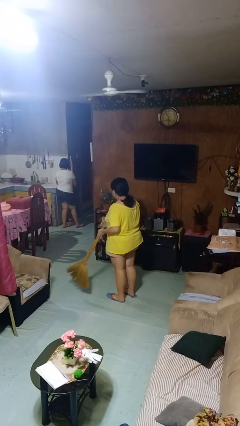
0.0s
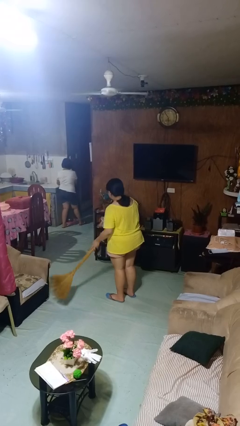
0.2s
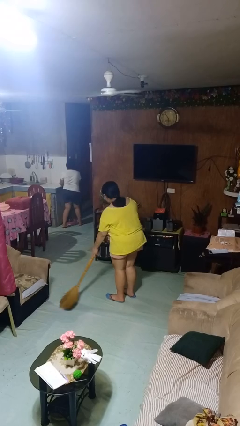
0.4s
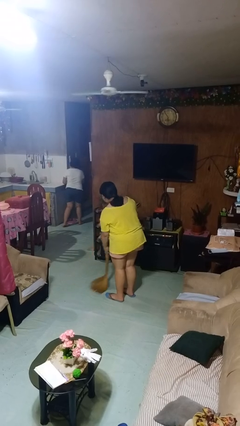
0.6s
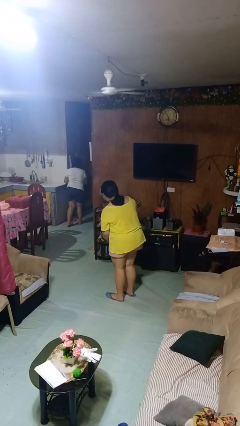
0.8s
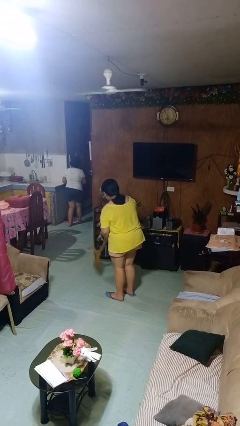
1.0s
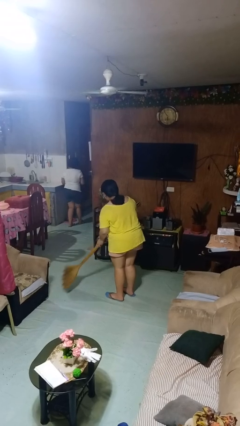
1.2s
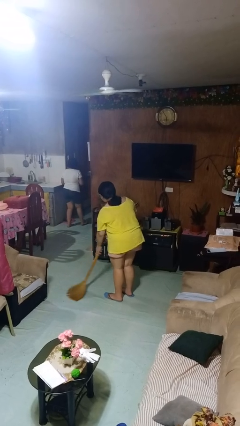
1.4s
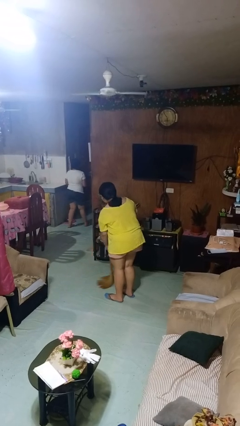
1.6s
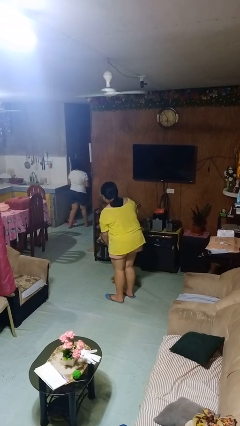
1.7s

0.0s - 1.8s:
person sweeps floor

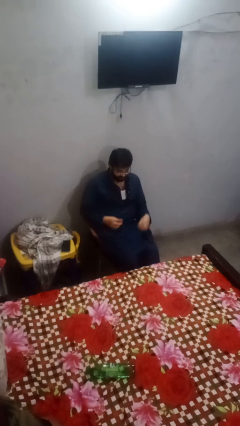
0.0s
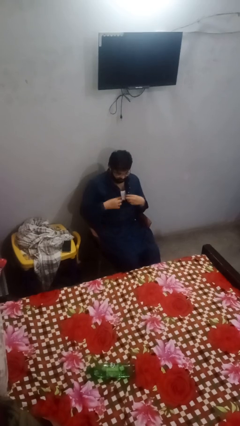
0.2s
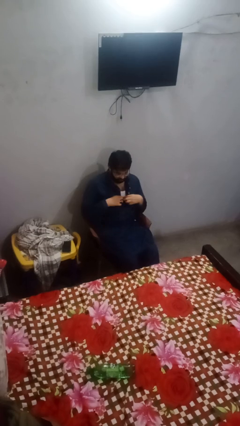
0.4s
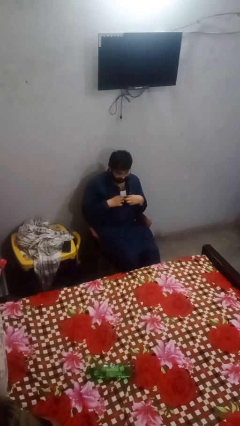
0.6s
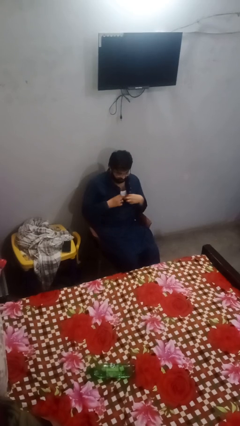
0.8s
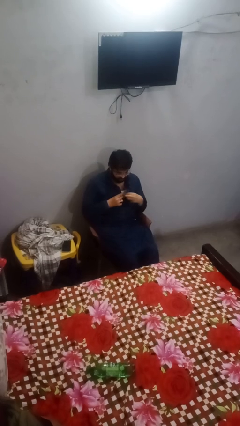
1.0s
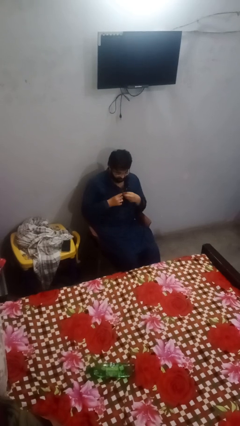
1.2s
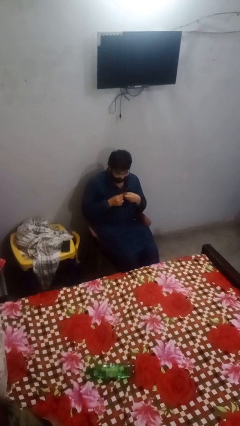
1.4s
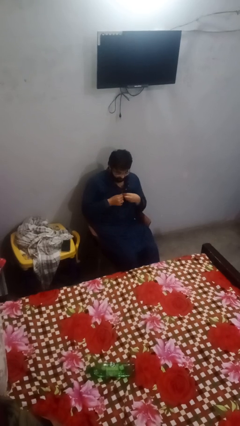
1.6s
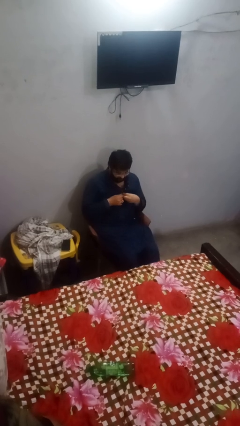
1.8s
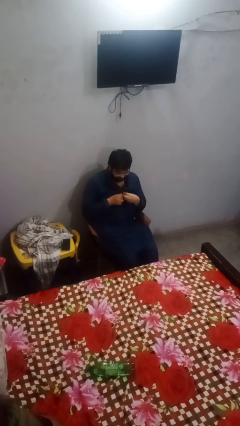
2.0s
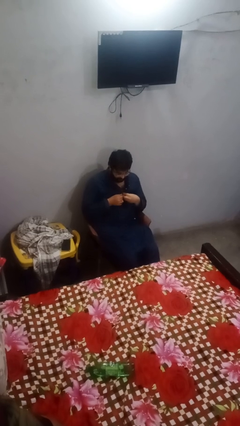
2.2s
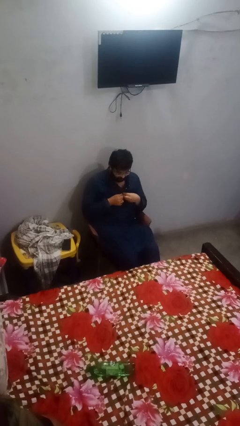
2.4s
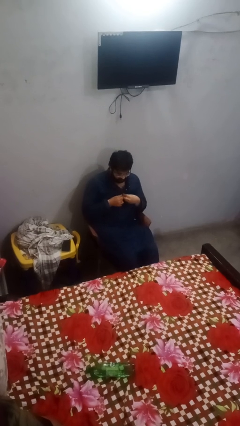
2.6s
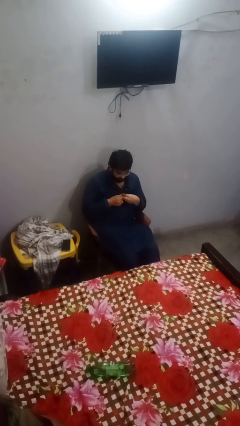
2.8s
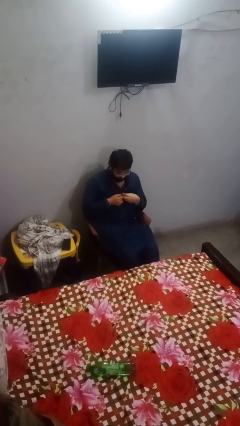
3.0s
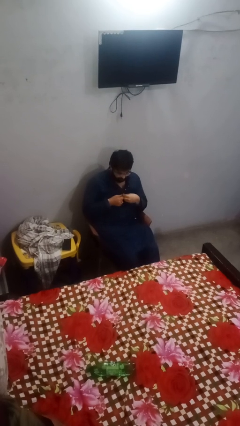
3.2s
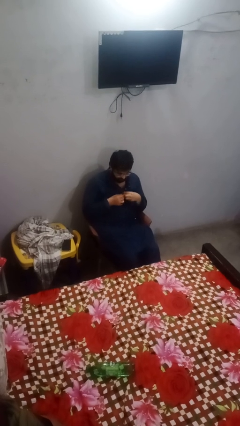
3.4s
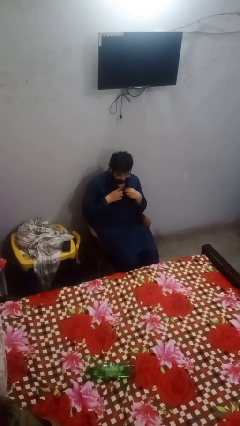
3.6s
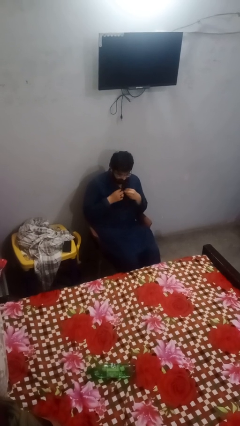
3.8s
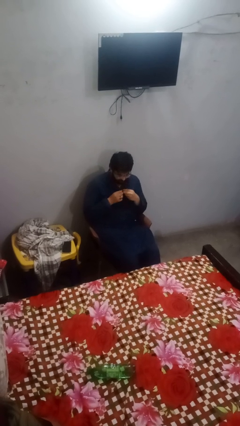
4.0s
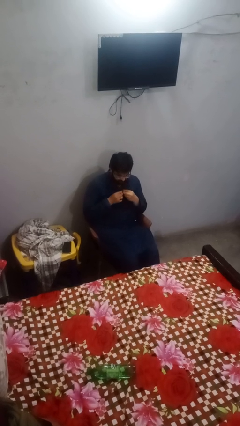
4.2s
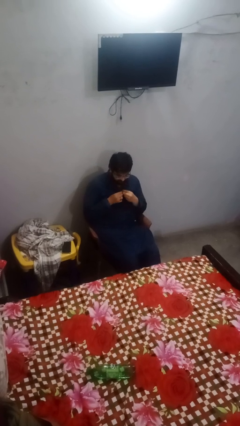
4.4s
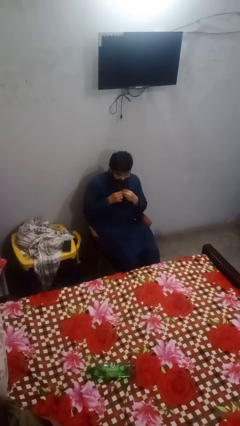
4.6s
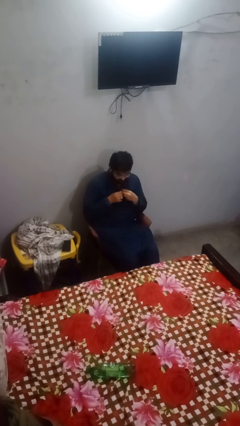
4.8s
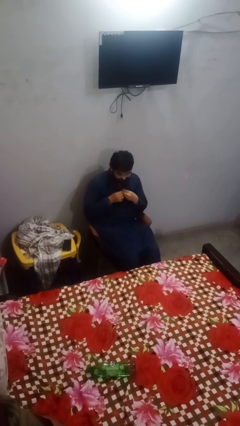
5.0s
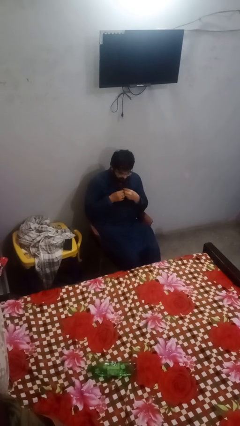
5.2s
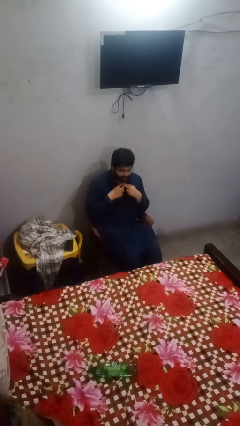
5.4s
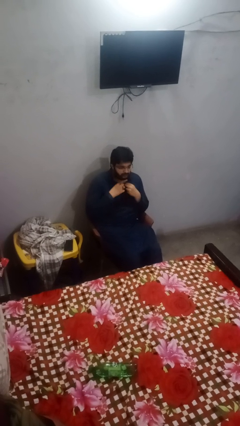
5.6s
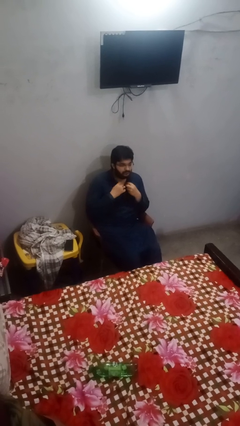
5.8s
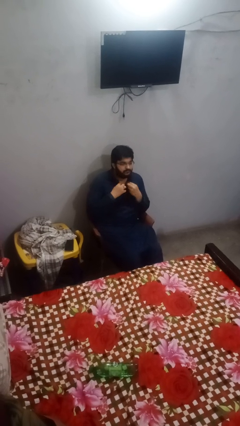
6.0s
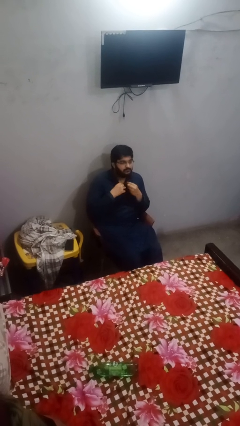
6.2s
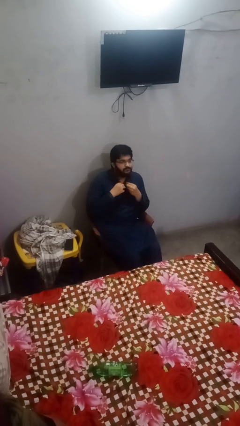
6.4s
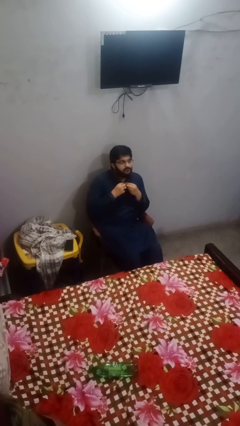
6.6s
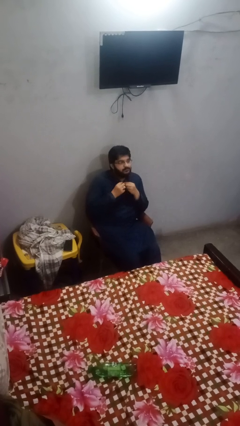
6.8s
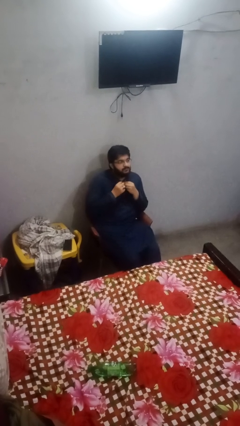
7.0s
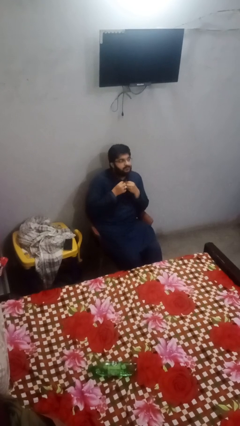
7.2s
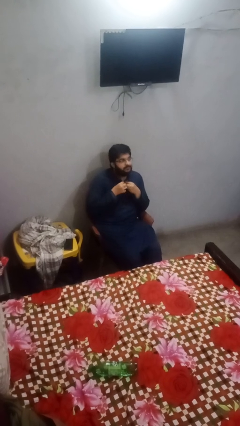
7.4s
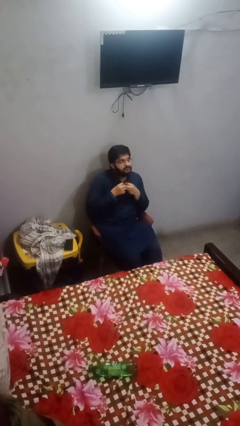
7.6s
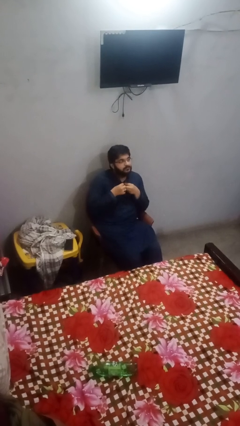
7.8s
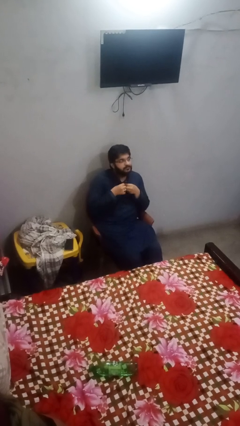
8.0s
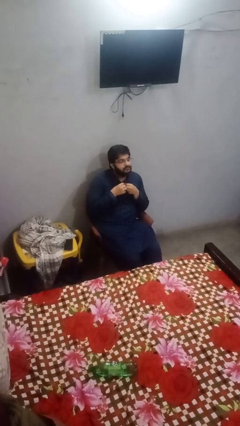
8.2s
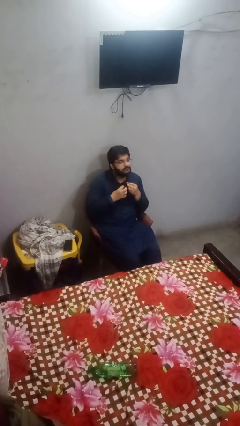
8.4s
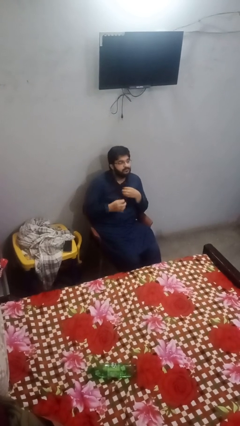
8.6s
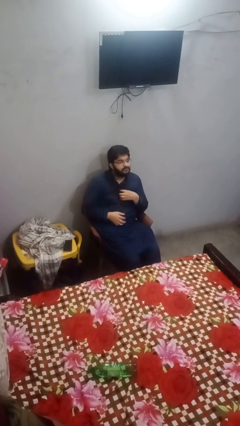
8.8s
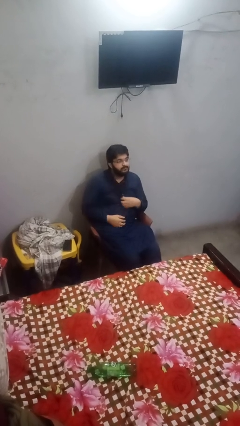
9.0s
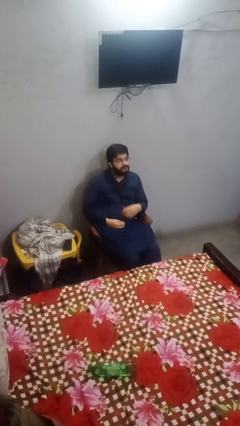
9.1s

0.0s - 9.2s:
person buttons shirt

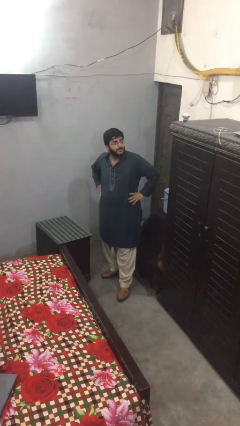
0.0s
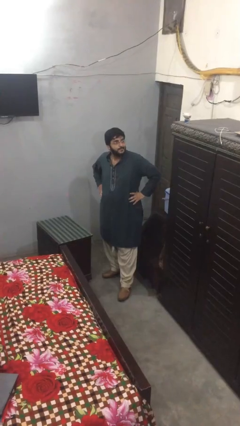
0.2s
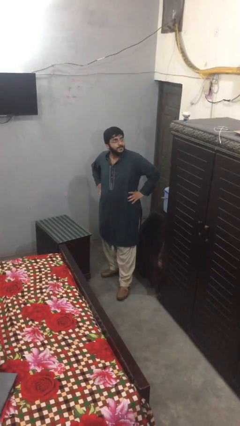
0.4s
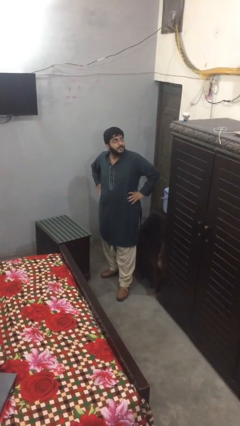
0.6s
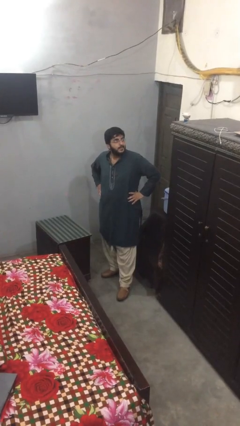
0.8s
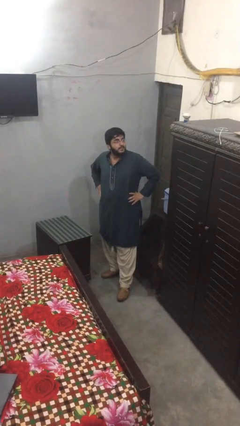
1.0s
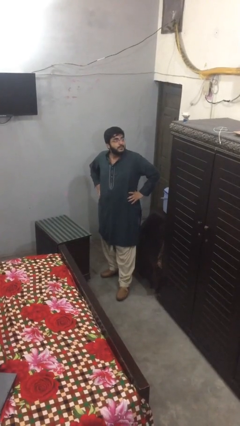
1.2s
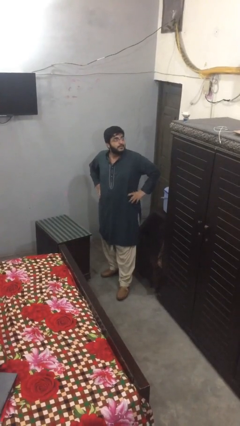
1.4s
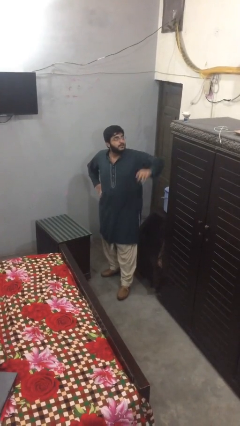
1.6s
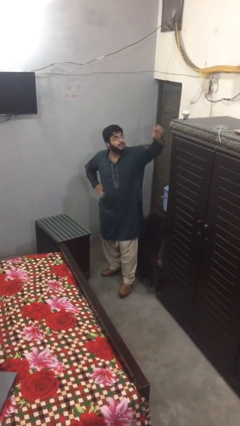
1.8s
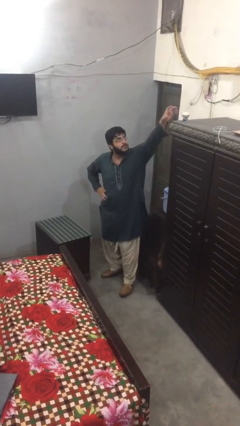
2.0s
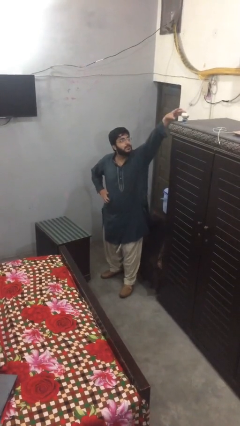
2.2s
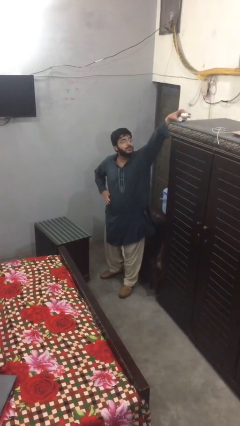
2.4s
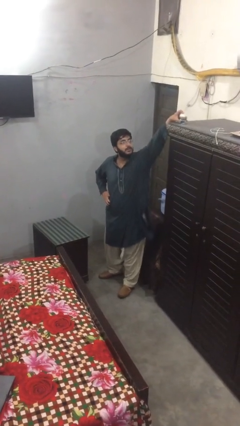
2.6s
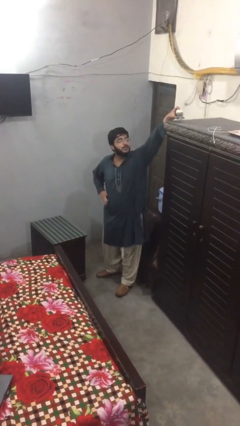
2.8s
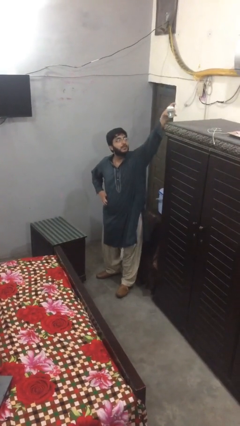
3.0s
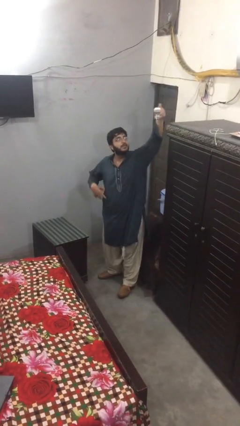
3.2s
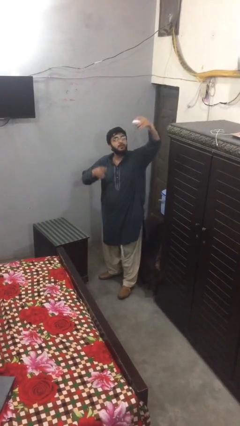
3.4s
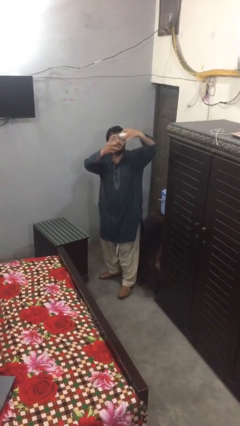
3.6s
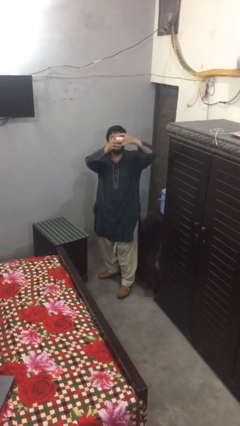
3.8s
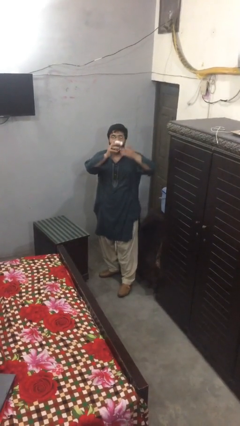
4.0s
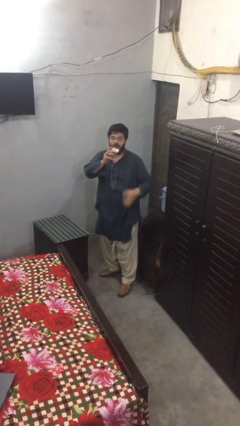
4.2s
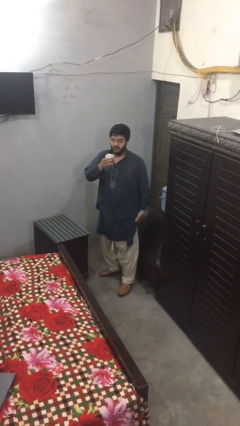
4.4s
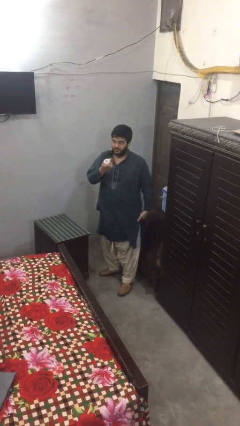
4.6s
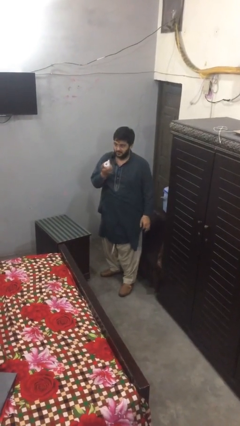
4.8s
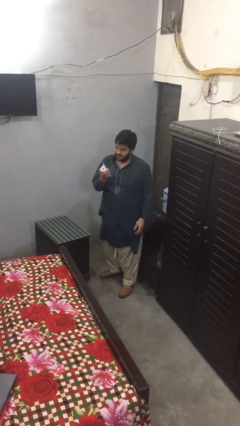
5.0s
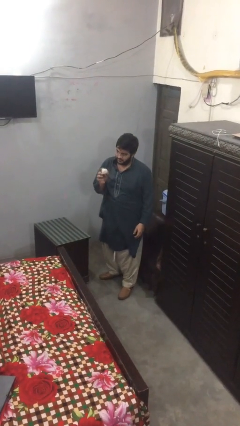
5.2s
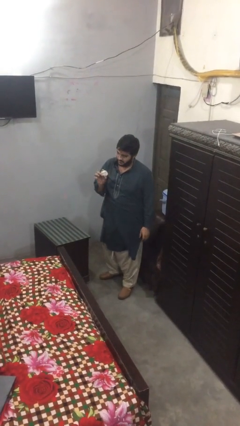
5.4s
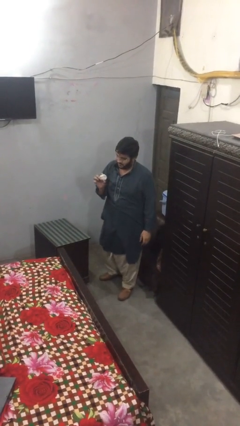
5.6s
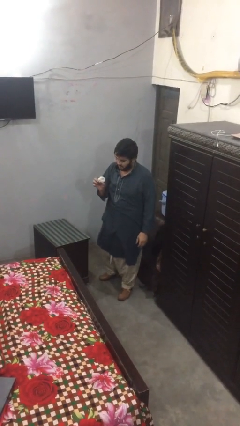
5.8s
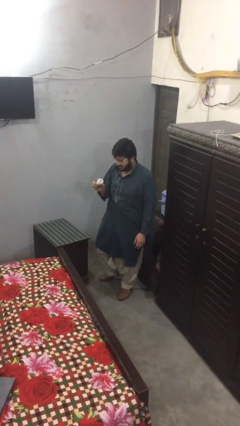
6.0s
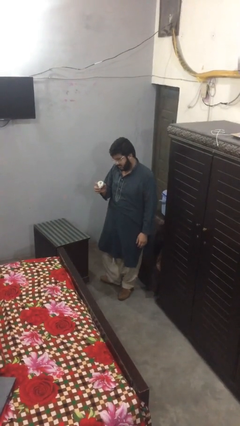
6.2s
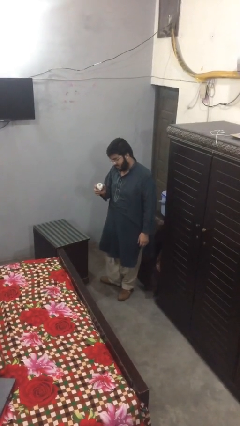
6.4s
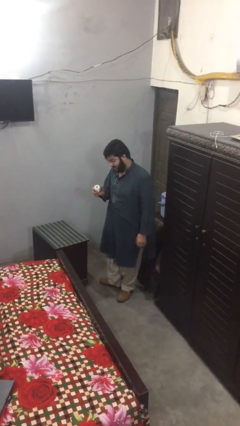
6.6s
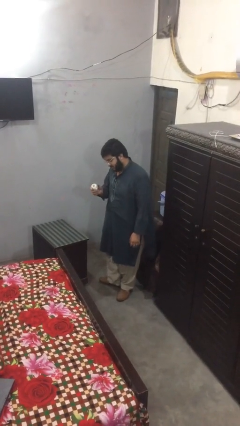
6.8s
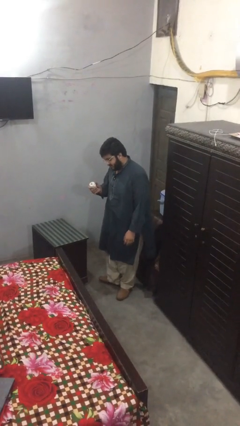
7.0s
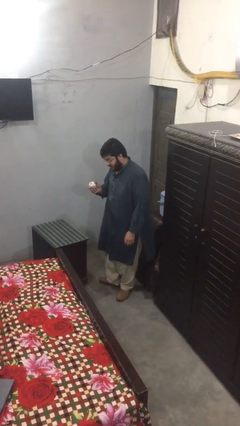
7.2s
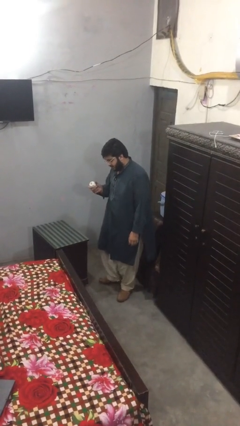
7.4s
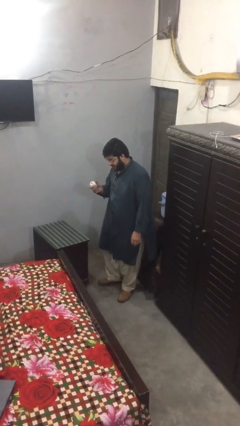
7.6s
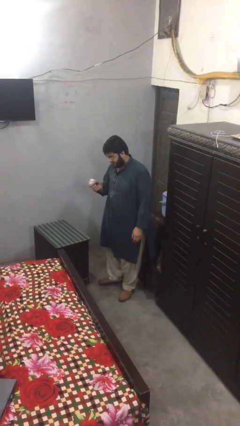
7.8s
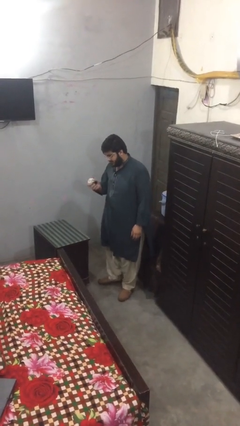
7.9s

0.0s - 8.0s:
person picks up object from shelf
